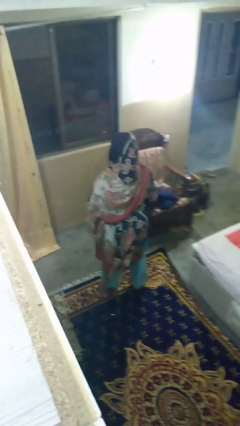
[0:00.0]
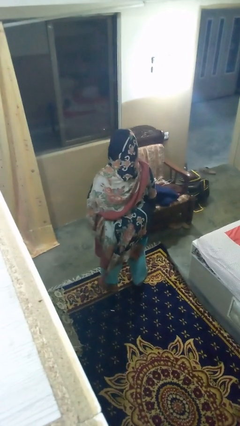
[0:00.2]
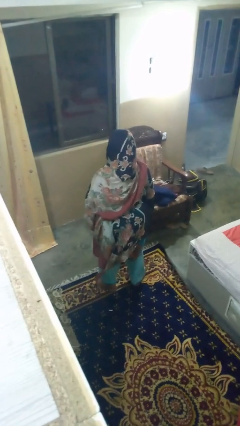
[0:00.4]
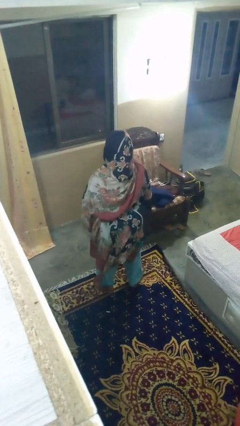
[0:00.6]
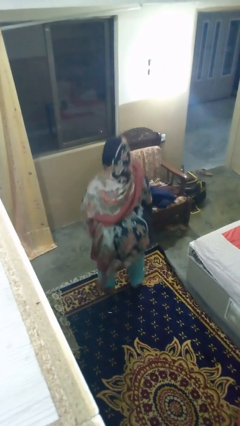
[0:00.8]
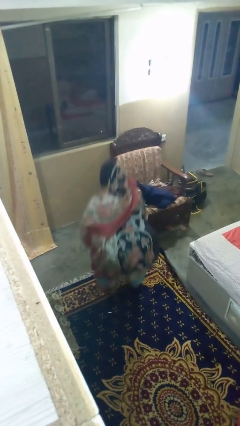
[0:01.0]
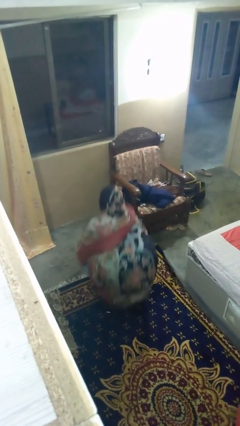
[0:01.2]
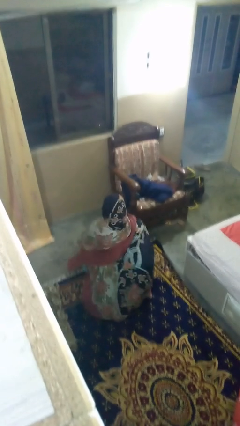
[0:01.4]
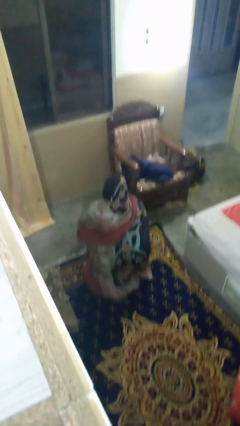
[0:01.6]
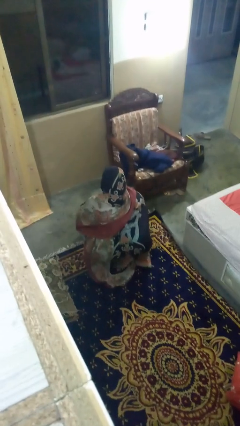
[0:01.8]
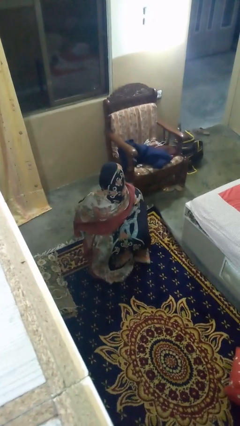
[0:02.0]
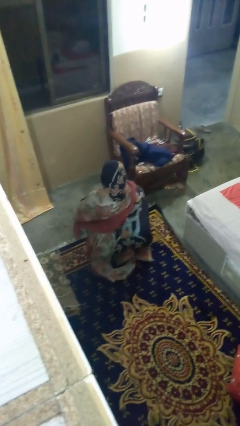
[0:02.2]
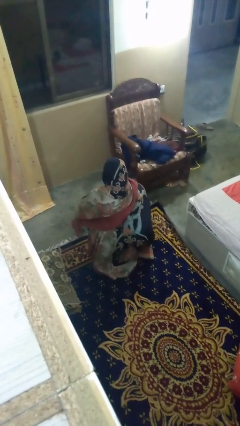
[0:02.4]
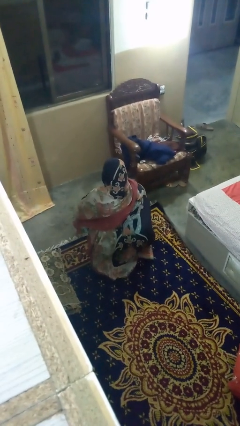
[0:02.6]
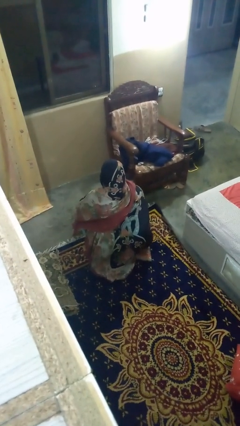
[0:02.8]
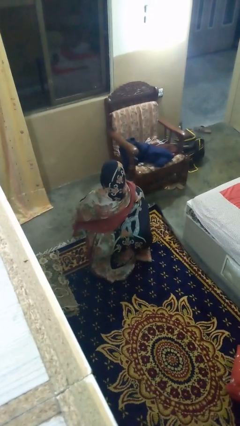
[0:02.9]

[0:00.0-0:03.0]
person squats

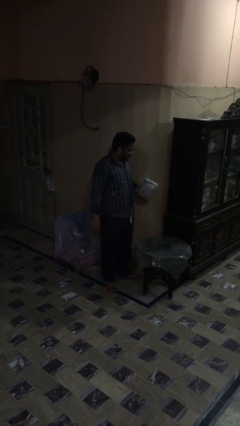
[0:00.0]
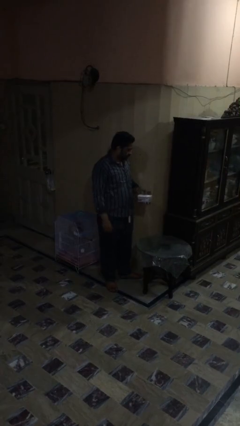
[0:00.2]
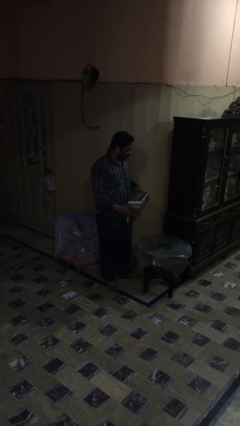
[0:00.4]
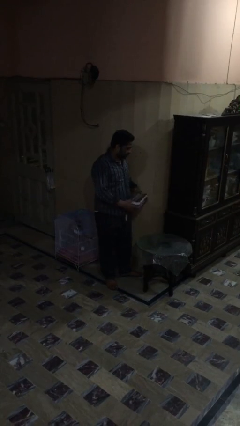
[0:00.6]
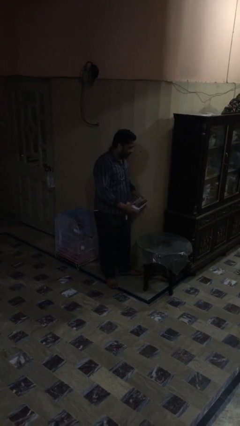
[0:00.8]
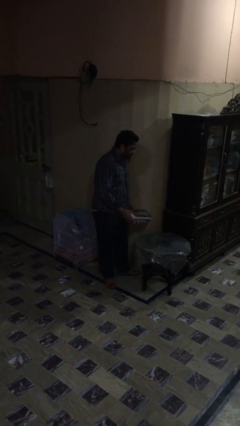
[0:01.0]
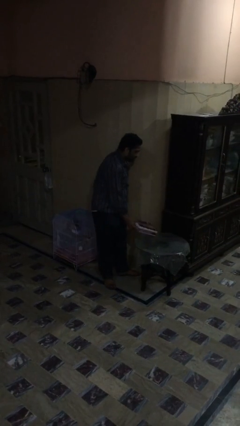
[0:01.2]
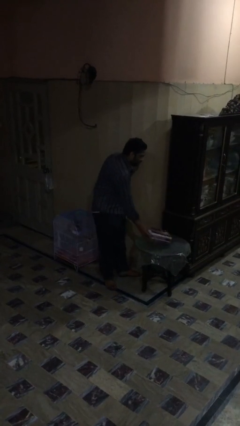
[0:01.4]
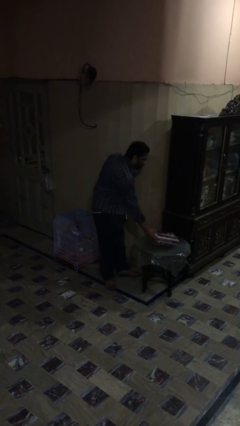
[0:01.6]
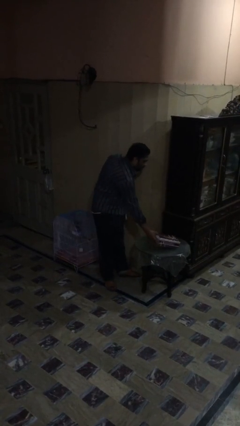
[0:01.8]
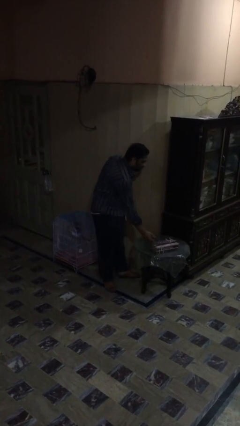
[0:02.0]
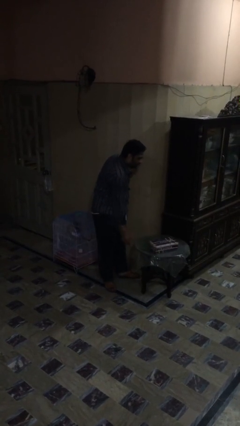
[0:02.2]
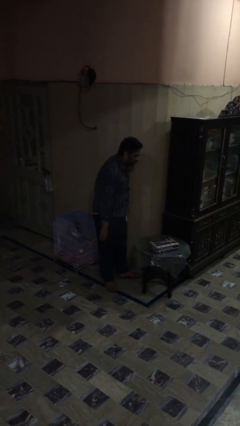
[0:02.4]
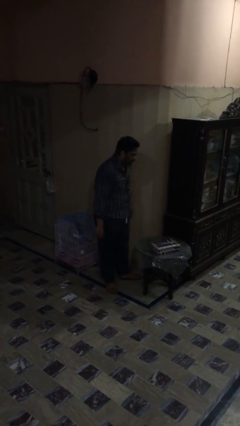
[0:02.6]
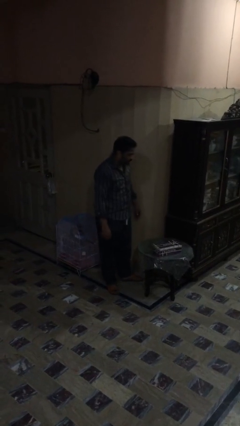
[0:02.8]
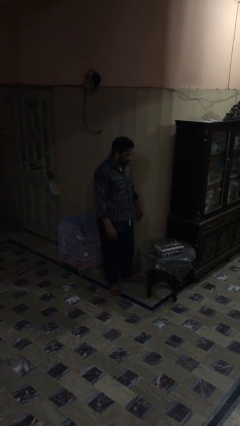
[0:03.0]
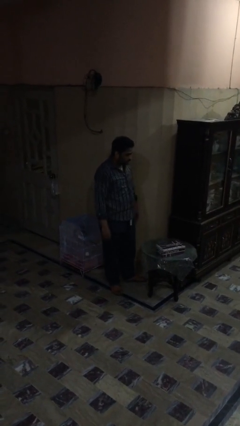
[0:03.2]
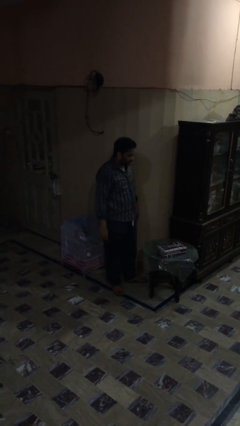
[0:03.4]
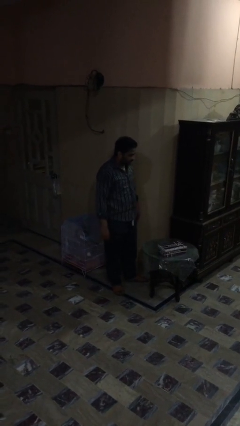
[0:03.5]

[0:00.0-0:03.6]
person puts down object on table

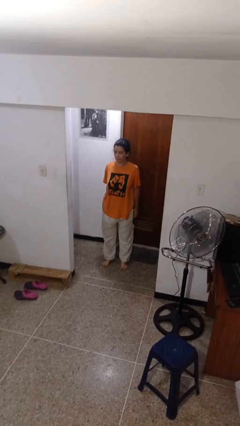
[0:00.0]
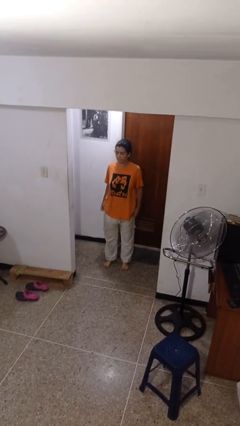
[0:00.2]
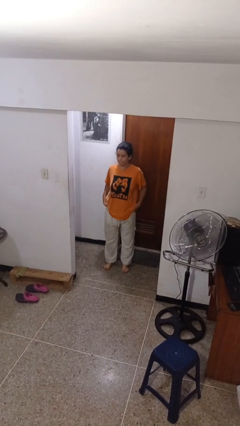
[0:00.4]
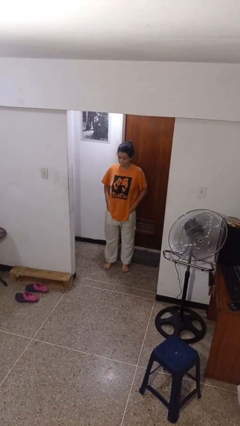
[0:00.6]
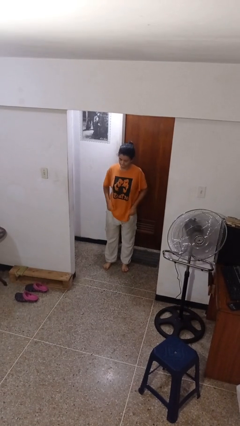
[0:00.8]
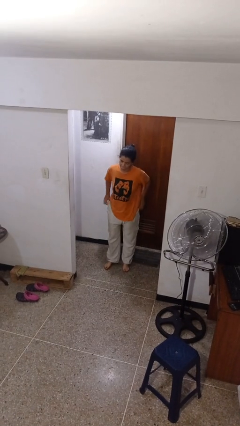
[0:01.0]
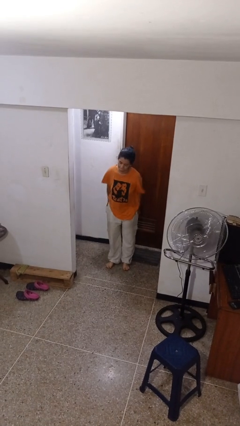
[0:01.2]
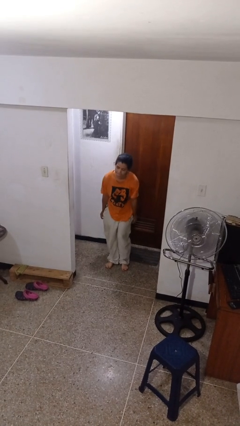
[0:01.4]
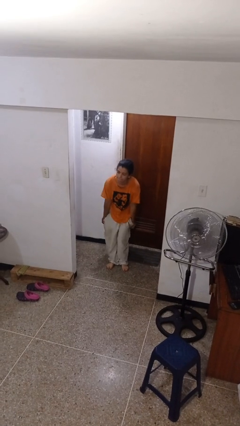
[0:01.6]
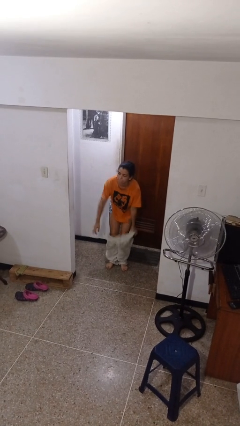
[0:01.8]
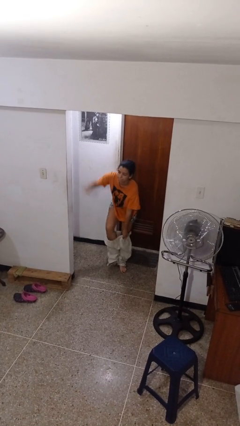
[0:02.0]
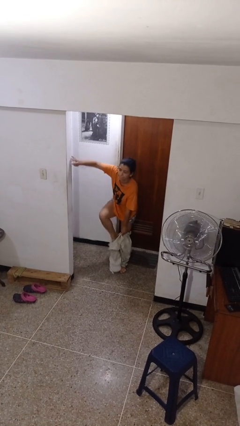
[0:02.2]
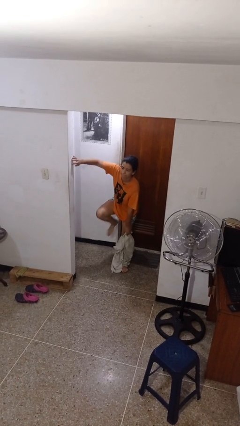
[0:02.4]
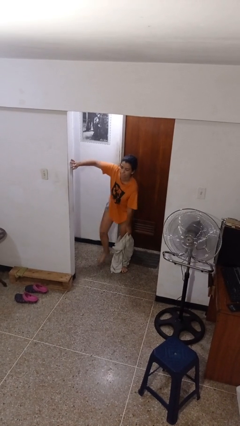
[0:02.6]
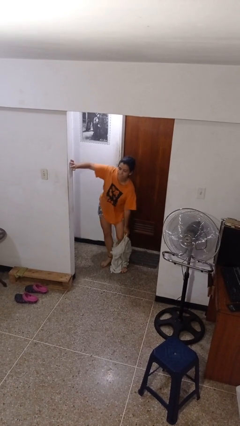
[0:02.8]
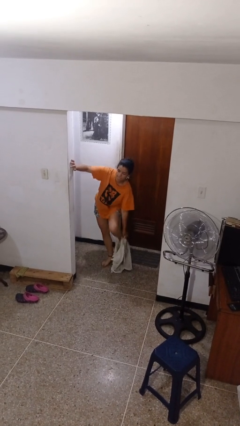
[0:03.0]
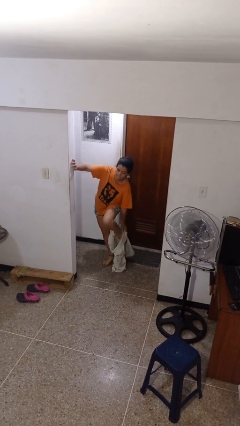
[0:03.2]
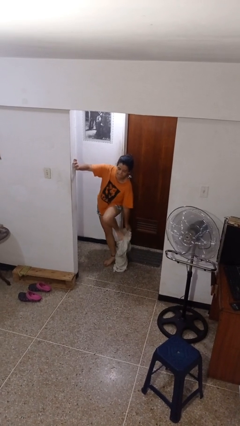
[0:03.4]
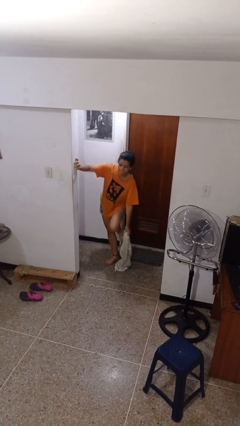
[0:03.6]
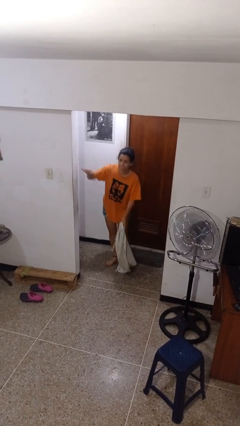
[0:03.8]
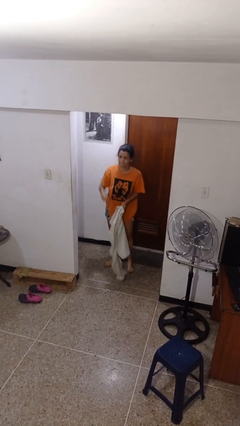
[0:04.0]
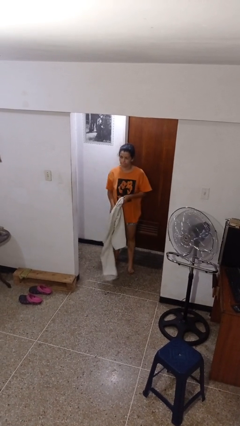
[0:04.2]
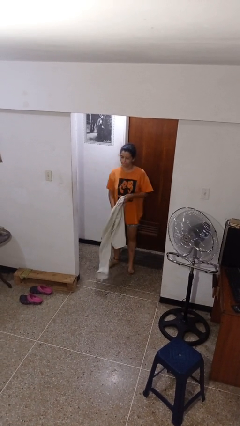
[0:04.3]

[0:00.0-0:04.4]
person takes off pants

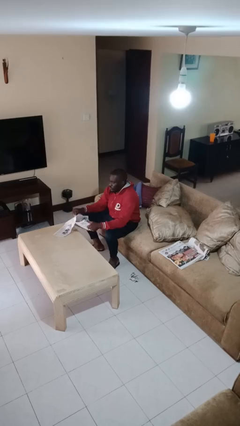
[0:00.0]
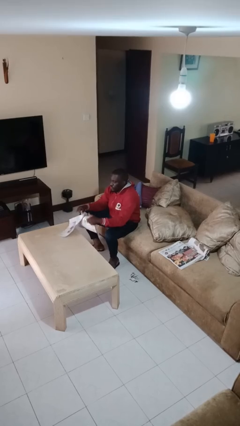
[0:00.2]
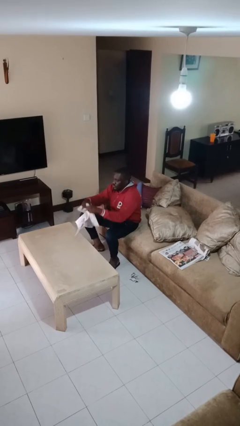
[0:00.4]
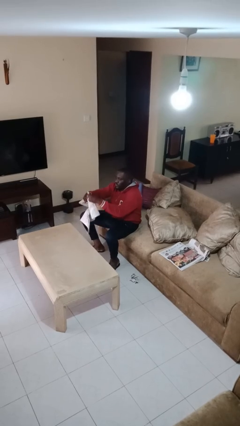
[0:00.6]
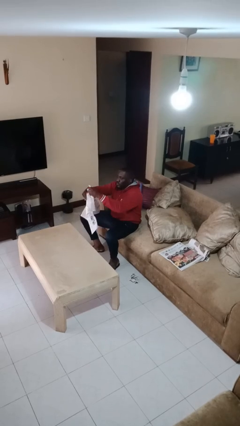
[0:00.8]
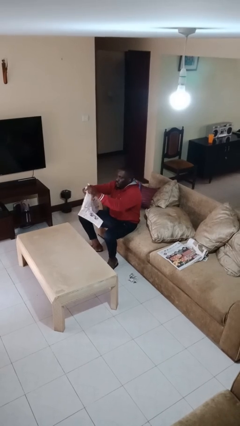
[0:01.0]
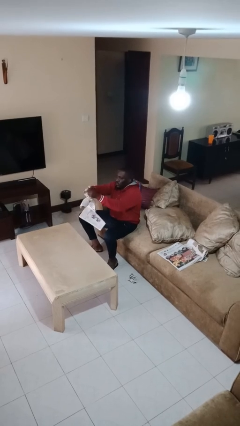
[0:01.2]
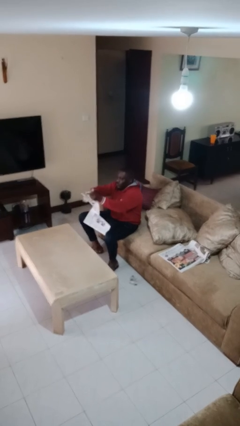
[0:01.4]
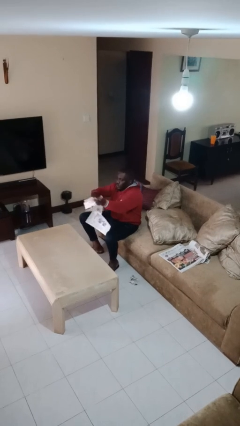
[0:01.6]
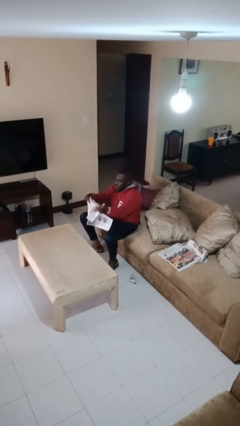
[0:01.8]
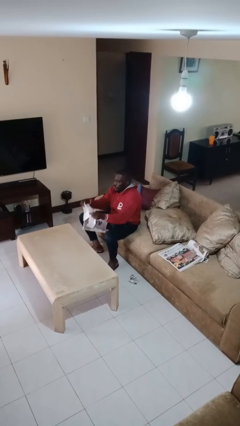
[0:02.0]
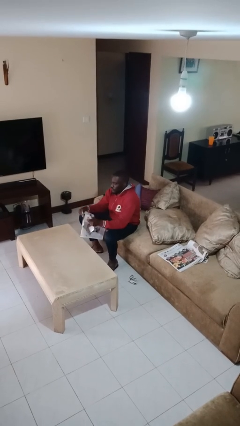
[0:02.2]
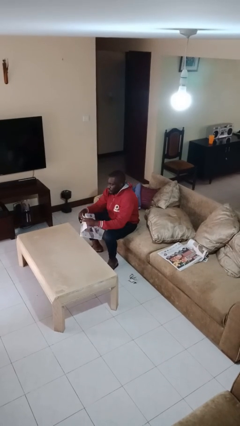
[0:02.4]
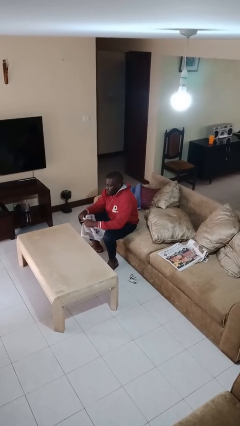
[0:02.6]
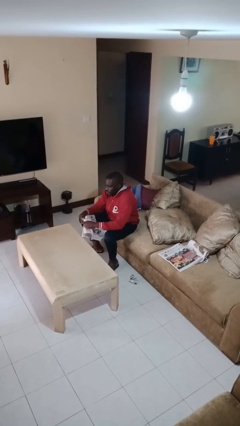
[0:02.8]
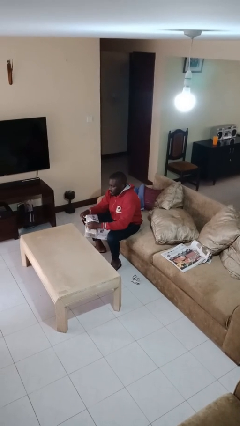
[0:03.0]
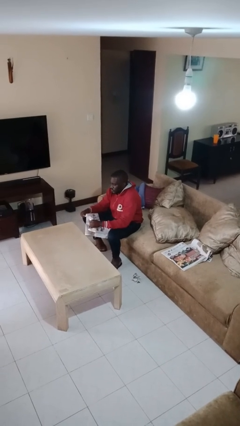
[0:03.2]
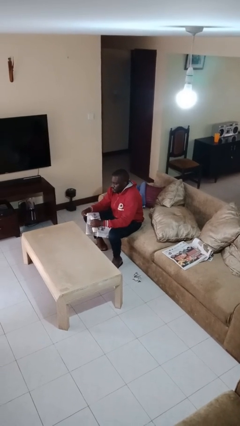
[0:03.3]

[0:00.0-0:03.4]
person tears paper

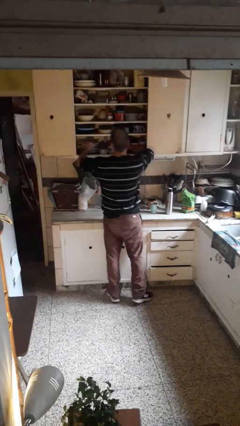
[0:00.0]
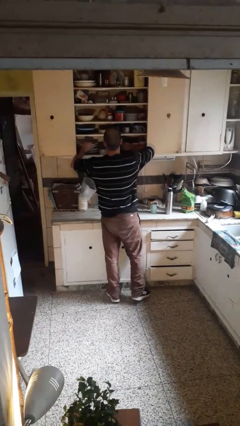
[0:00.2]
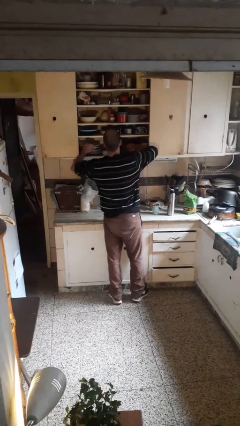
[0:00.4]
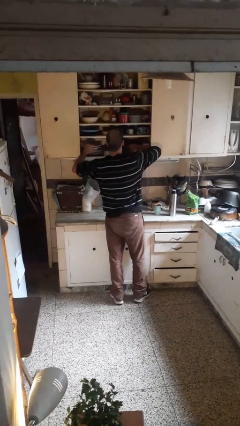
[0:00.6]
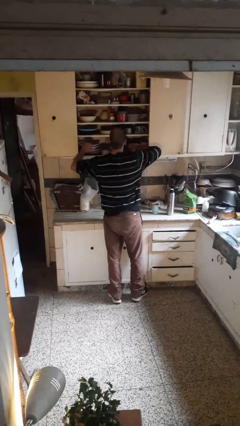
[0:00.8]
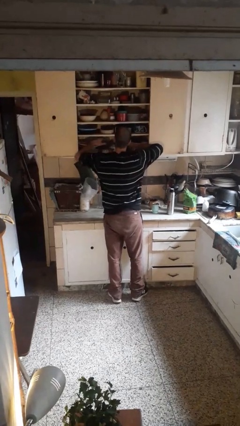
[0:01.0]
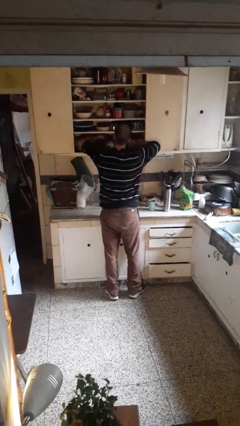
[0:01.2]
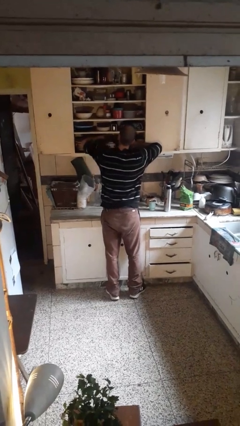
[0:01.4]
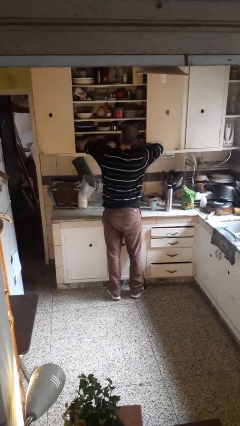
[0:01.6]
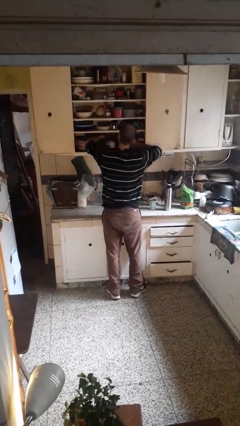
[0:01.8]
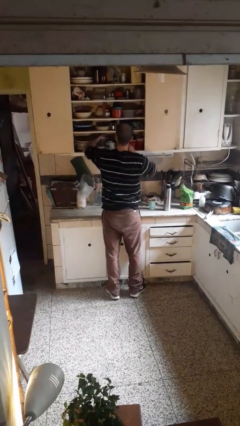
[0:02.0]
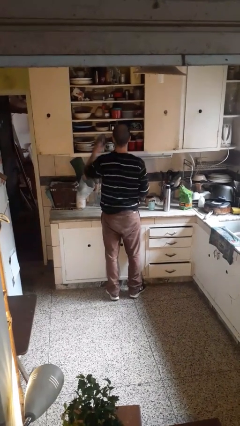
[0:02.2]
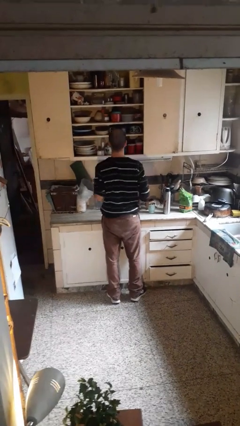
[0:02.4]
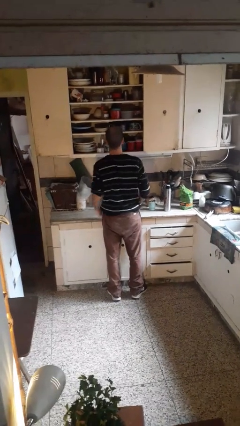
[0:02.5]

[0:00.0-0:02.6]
person searches in cabinet

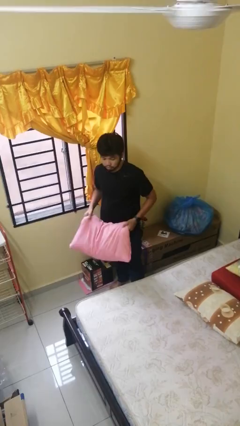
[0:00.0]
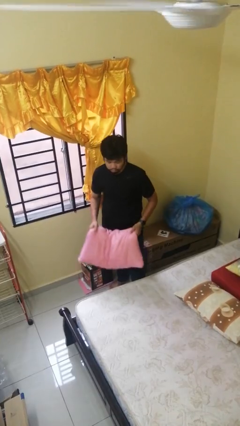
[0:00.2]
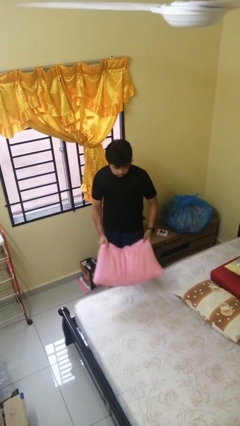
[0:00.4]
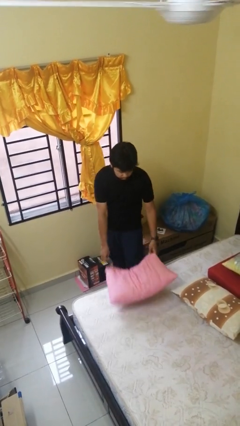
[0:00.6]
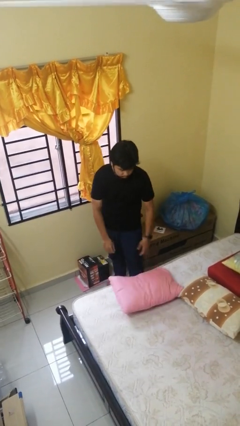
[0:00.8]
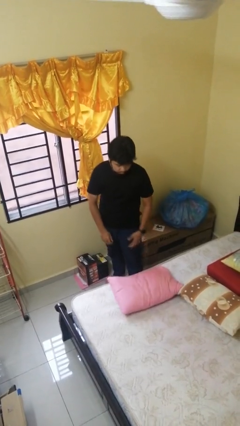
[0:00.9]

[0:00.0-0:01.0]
person puts down object on bed
